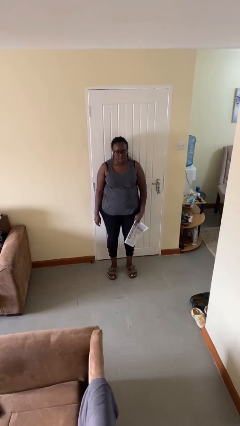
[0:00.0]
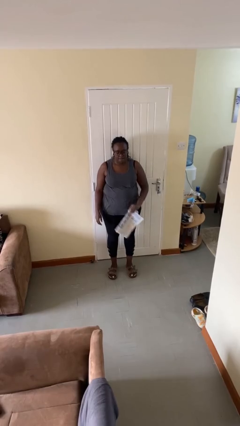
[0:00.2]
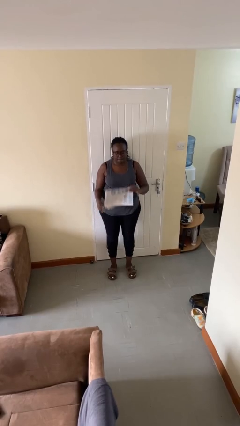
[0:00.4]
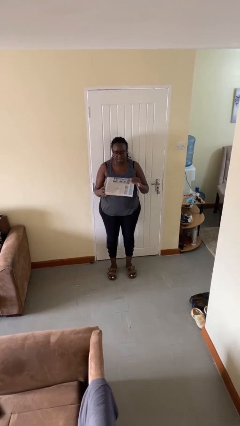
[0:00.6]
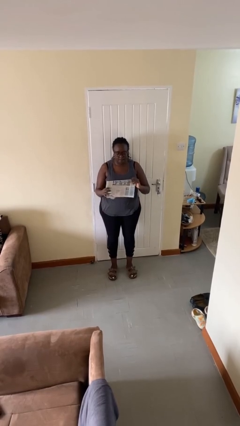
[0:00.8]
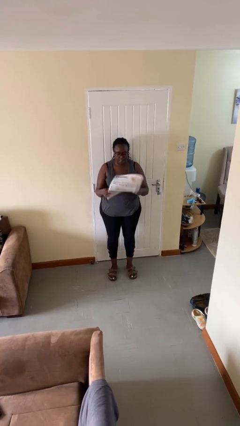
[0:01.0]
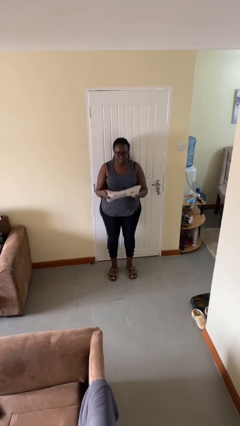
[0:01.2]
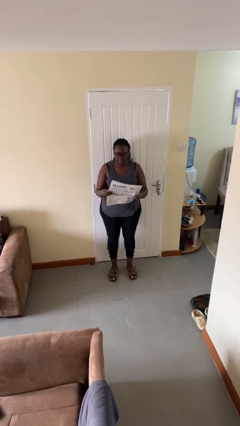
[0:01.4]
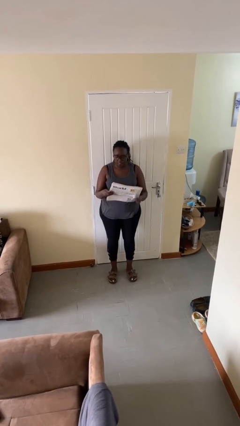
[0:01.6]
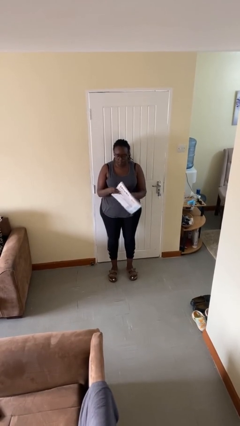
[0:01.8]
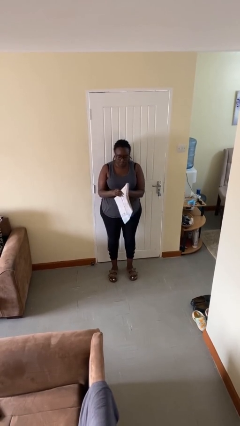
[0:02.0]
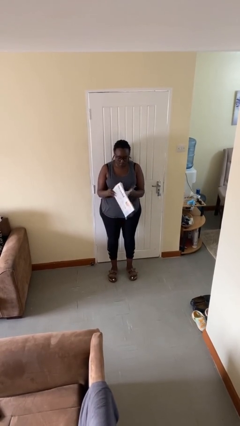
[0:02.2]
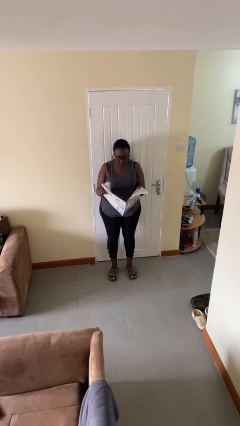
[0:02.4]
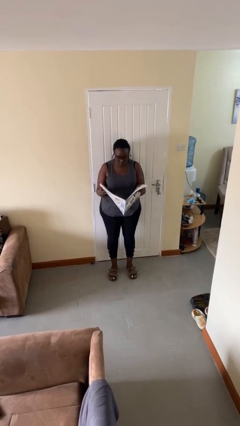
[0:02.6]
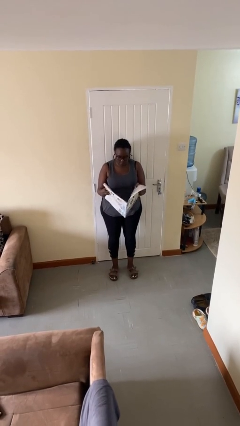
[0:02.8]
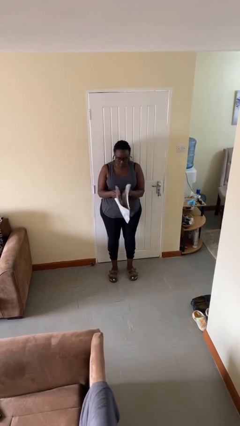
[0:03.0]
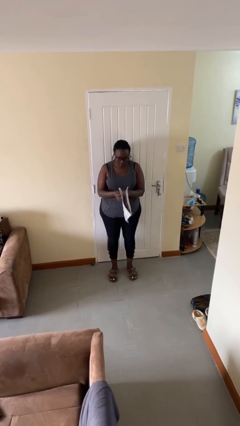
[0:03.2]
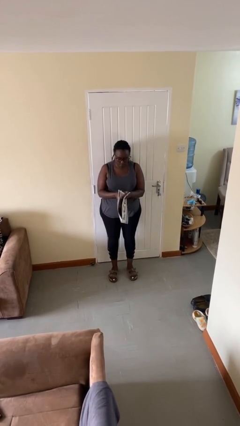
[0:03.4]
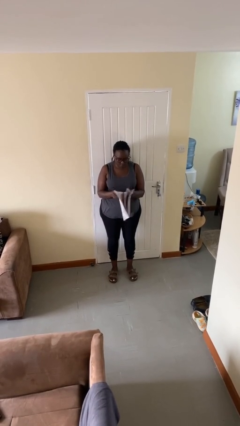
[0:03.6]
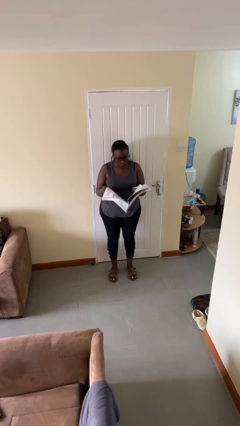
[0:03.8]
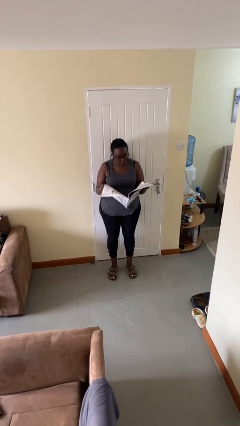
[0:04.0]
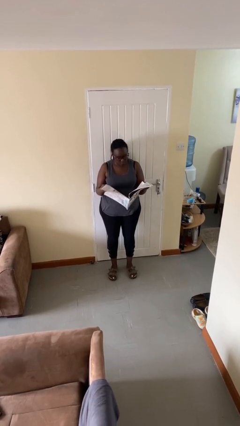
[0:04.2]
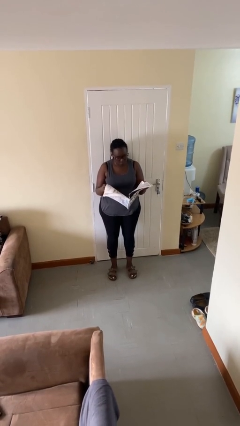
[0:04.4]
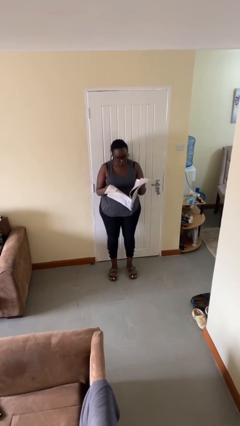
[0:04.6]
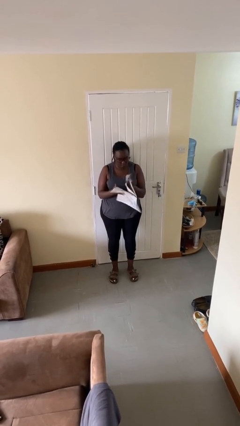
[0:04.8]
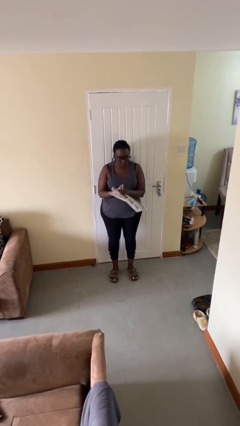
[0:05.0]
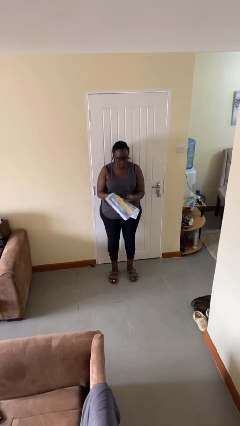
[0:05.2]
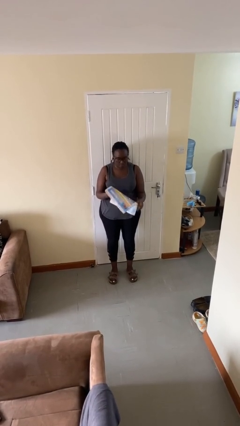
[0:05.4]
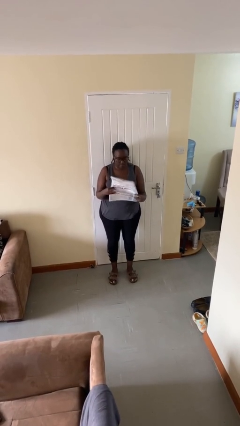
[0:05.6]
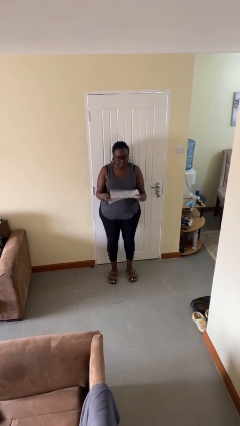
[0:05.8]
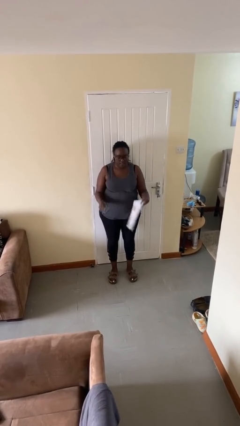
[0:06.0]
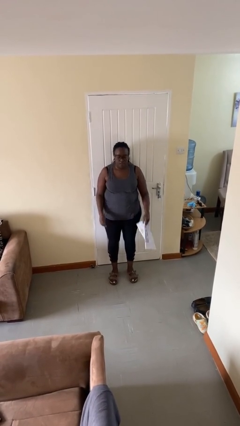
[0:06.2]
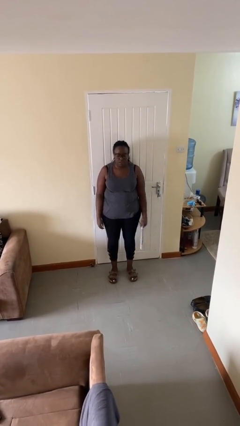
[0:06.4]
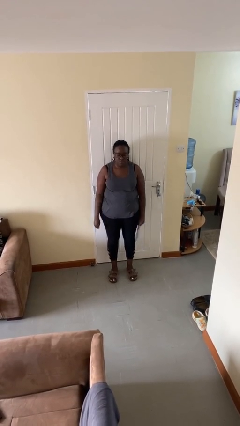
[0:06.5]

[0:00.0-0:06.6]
person reads newspaper

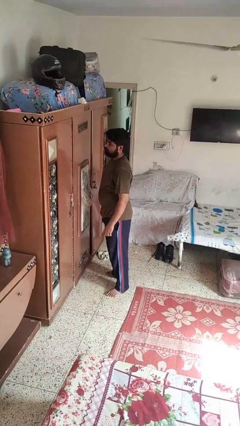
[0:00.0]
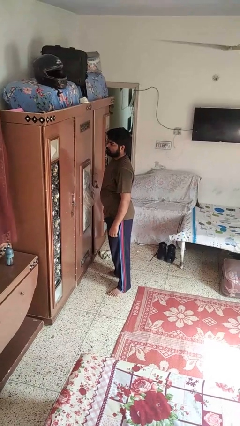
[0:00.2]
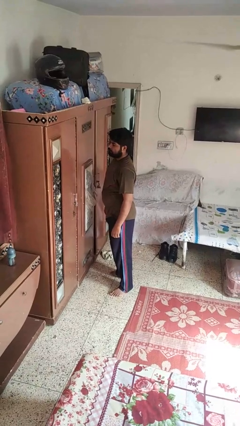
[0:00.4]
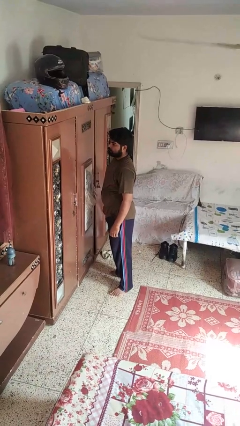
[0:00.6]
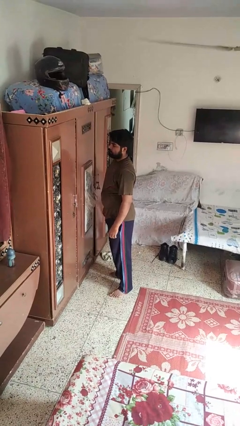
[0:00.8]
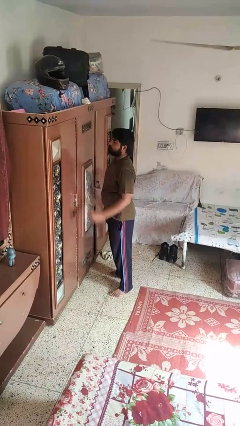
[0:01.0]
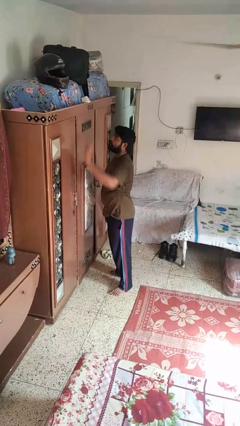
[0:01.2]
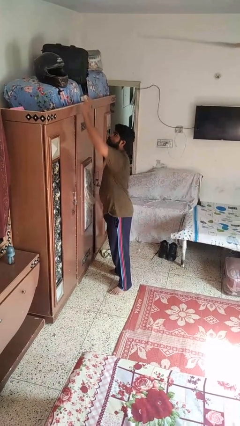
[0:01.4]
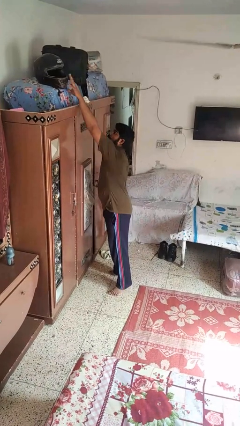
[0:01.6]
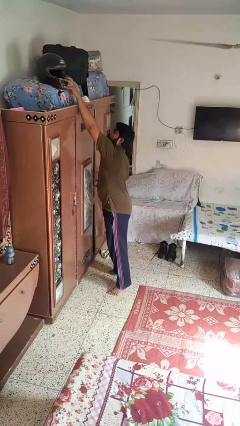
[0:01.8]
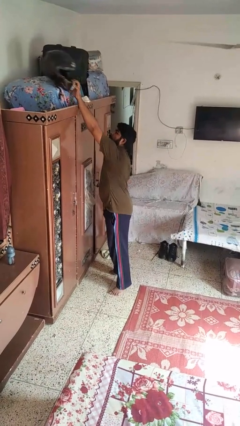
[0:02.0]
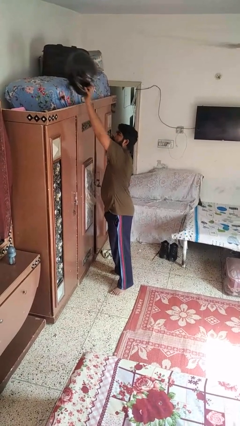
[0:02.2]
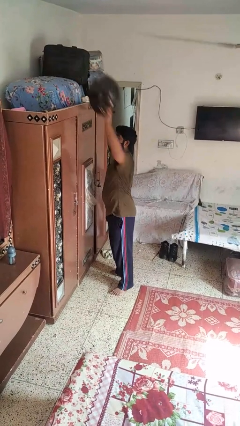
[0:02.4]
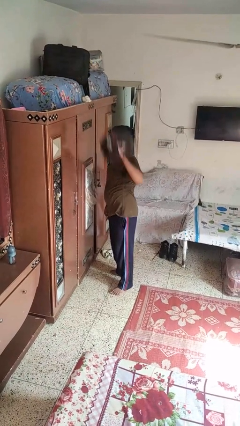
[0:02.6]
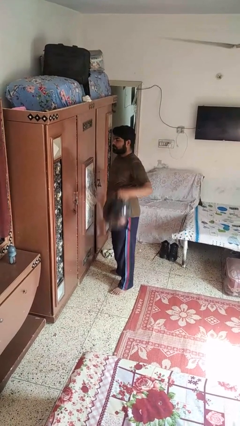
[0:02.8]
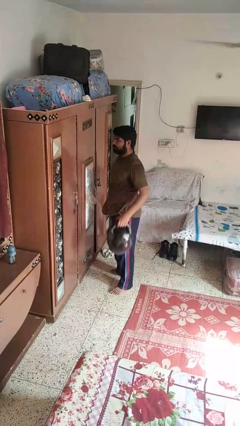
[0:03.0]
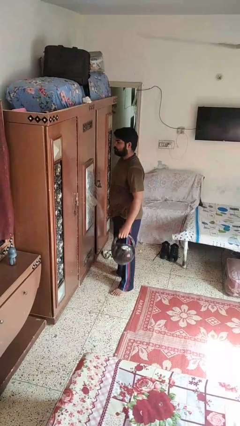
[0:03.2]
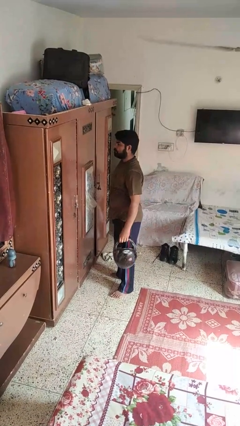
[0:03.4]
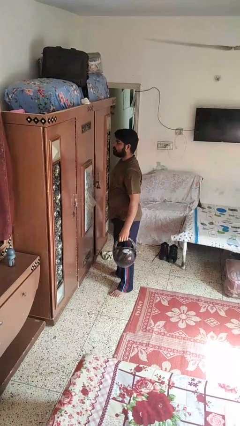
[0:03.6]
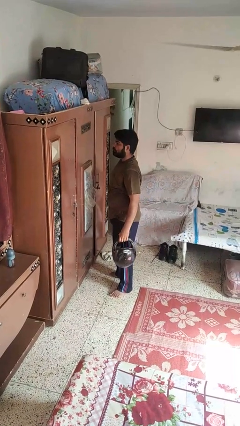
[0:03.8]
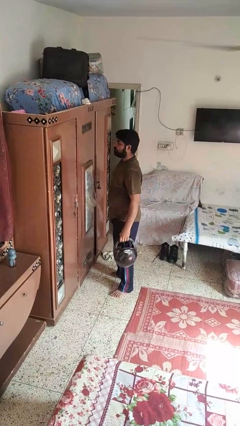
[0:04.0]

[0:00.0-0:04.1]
person picks up object from shelf

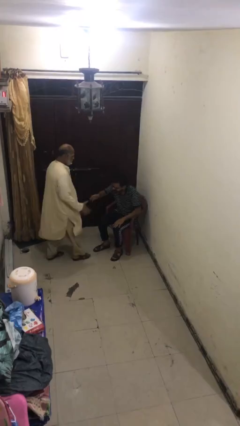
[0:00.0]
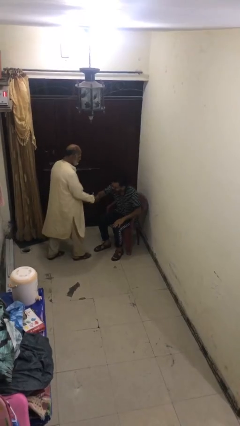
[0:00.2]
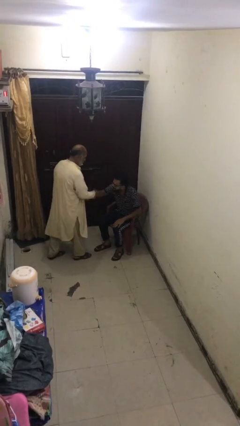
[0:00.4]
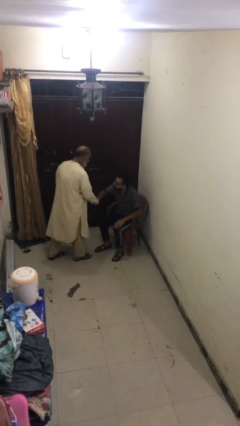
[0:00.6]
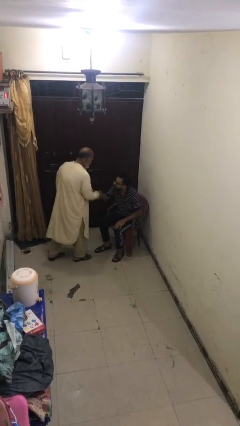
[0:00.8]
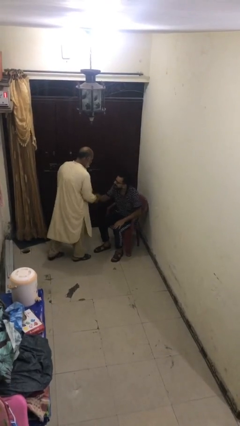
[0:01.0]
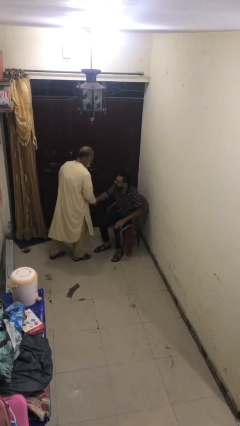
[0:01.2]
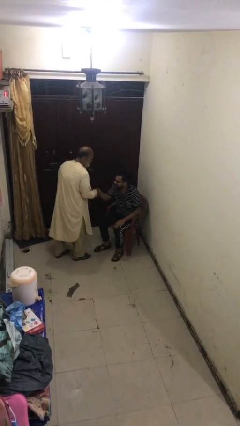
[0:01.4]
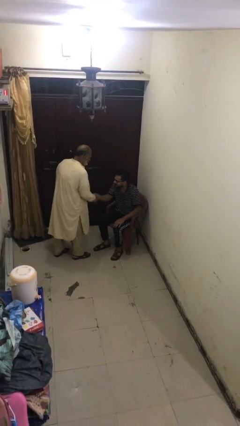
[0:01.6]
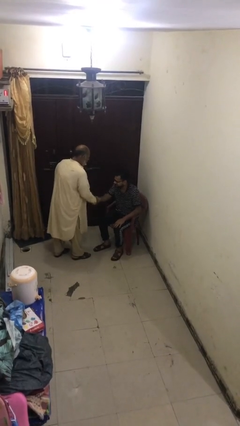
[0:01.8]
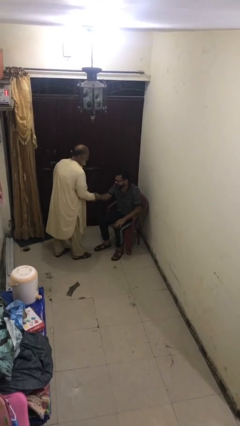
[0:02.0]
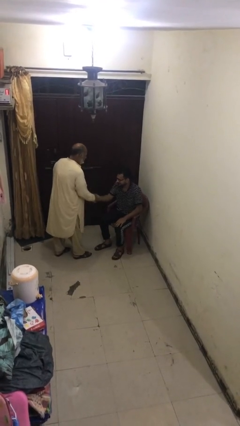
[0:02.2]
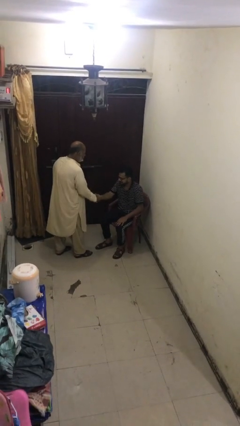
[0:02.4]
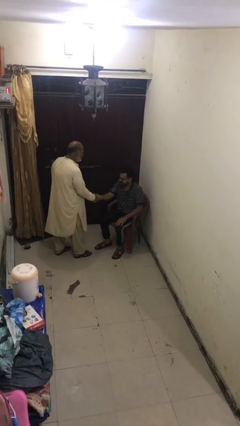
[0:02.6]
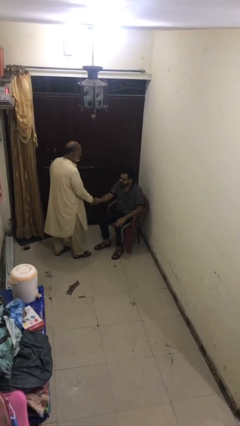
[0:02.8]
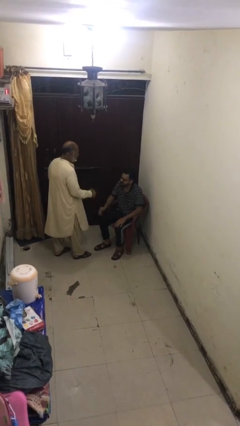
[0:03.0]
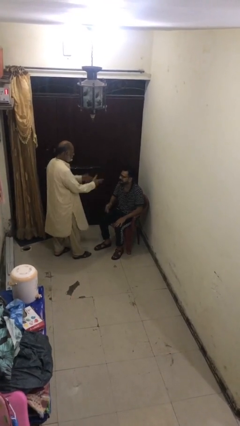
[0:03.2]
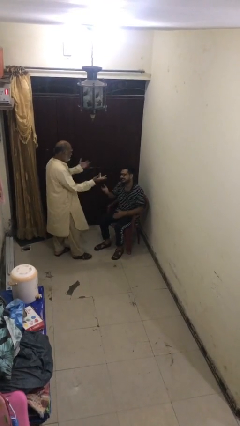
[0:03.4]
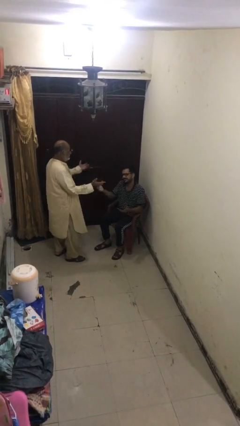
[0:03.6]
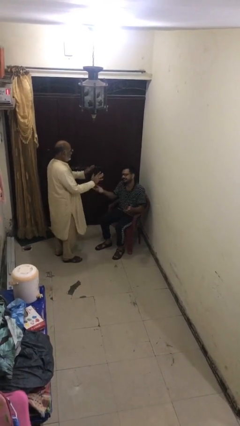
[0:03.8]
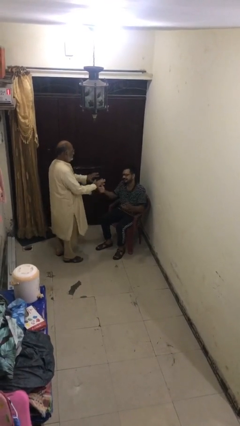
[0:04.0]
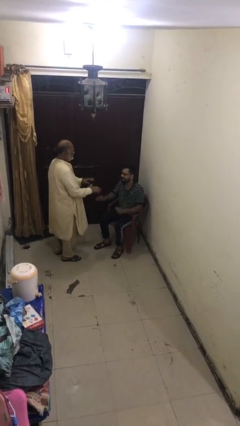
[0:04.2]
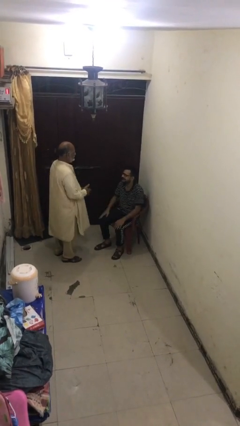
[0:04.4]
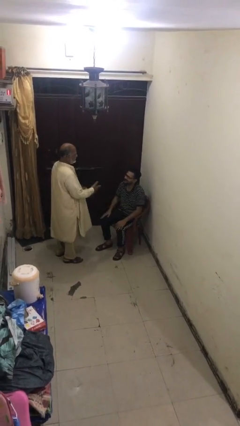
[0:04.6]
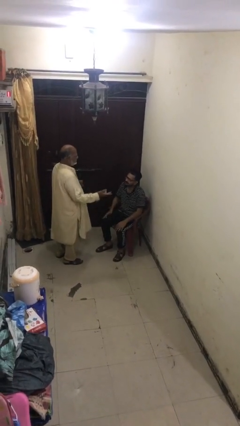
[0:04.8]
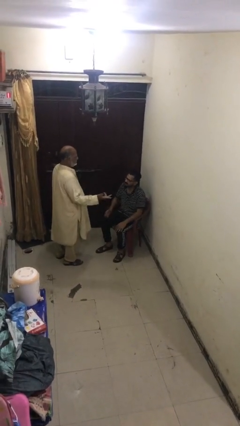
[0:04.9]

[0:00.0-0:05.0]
person shakes hand

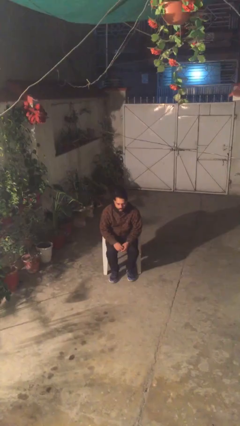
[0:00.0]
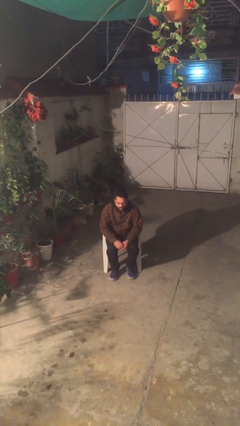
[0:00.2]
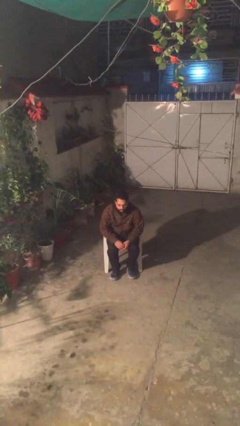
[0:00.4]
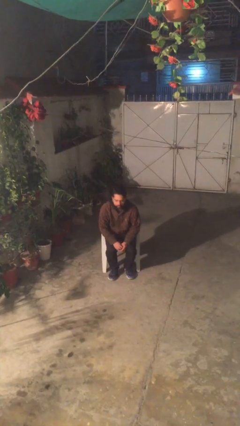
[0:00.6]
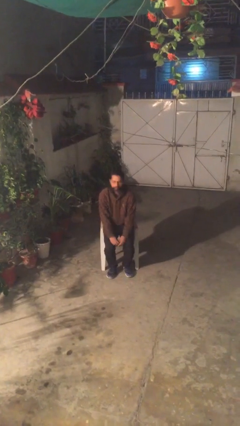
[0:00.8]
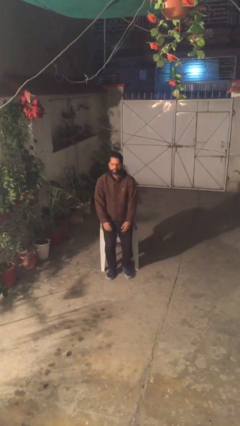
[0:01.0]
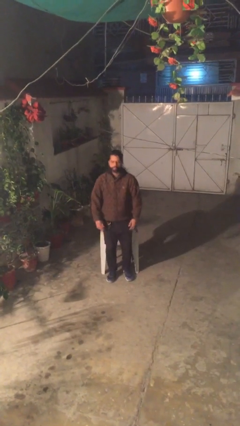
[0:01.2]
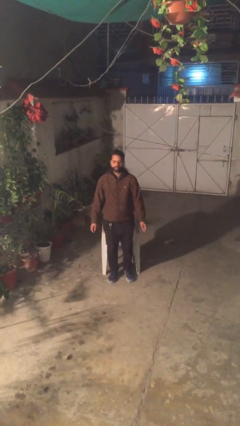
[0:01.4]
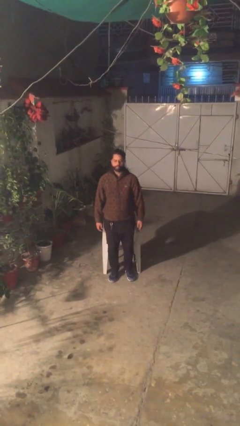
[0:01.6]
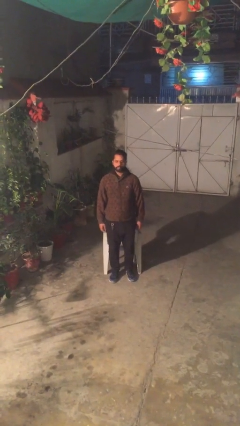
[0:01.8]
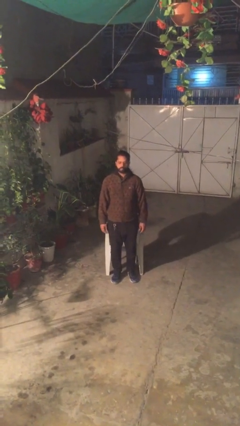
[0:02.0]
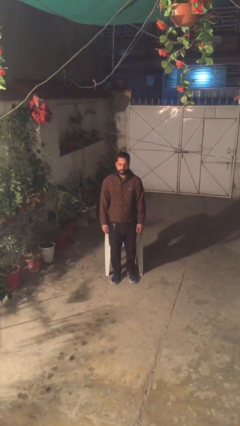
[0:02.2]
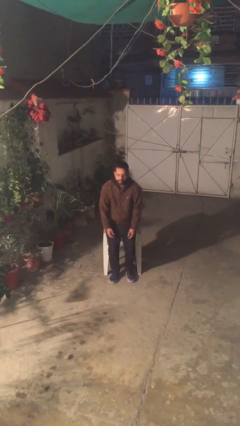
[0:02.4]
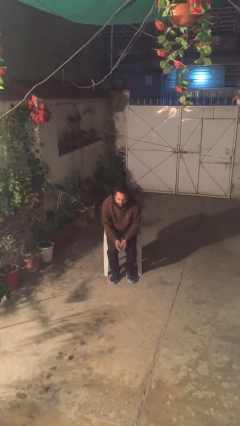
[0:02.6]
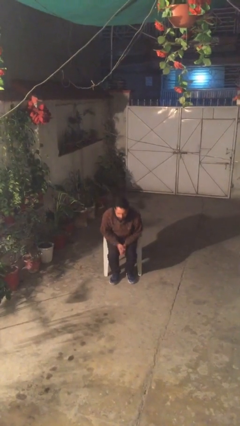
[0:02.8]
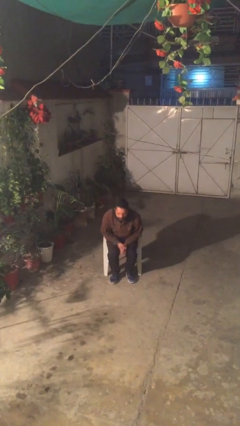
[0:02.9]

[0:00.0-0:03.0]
person stands up
